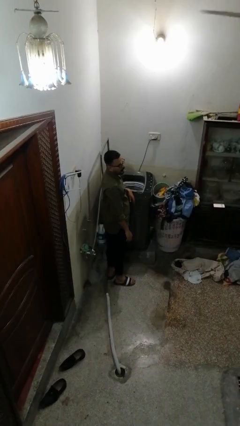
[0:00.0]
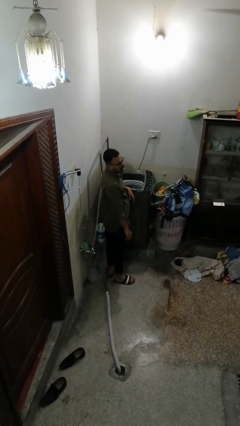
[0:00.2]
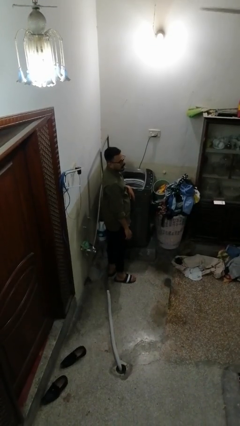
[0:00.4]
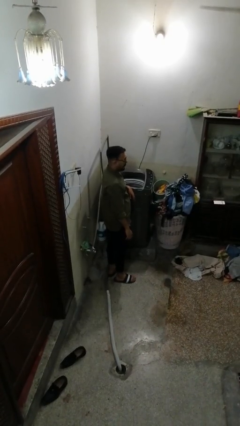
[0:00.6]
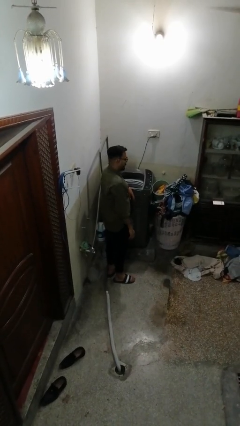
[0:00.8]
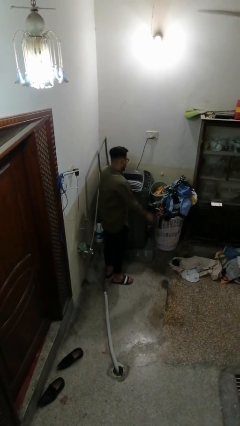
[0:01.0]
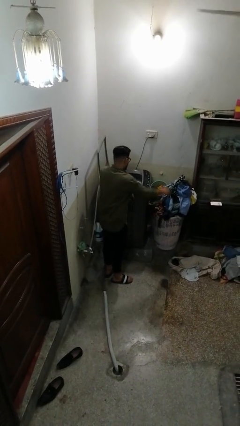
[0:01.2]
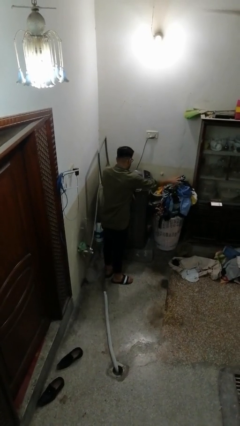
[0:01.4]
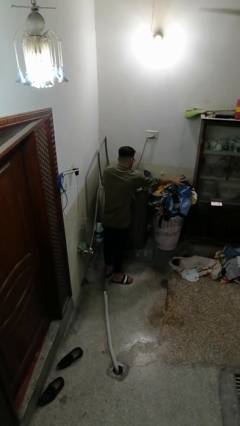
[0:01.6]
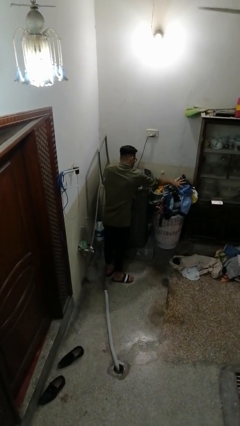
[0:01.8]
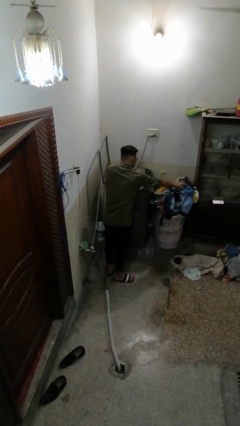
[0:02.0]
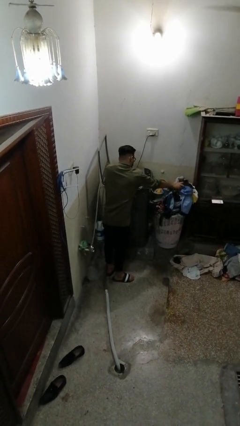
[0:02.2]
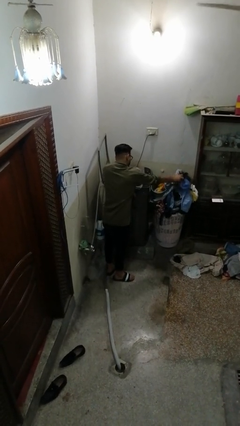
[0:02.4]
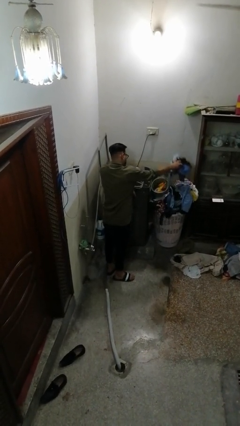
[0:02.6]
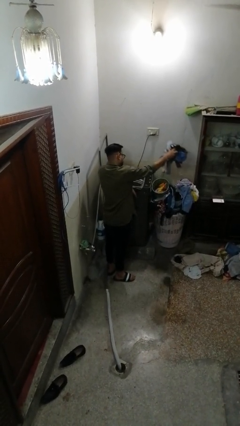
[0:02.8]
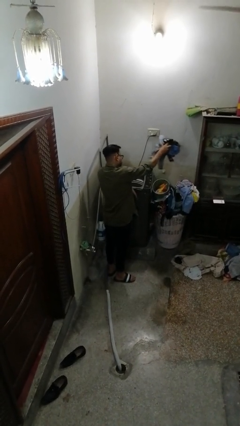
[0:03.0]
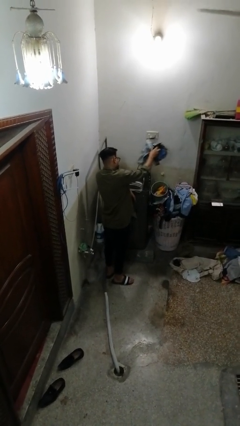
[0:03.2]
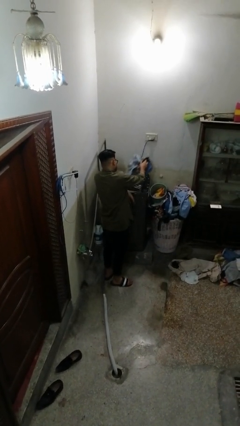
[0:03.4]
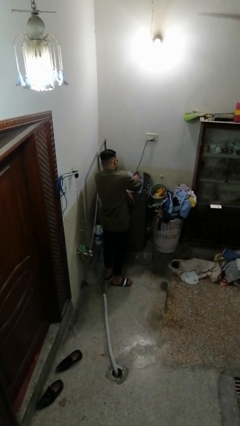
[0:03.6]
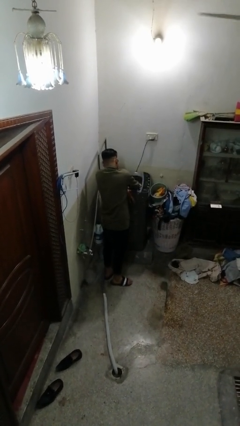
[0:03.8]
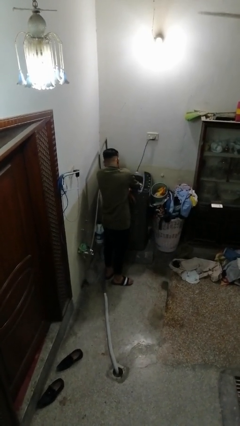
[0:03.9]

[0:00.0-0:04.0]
person loads clotheswasher

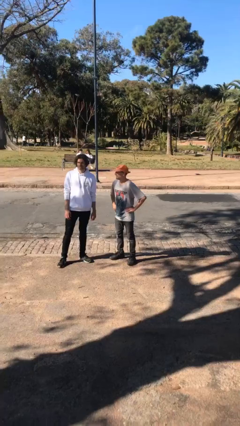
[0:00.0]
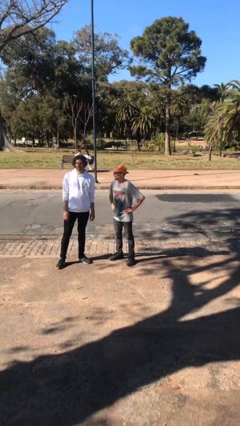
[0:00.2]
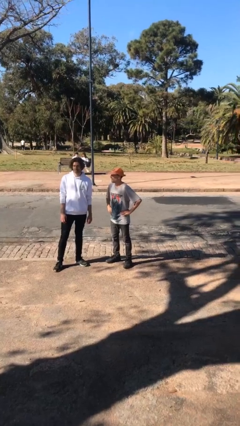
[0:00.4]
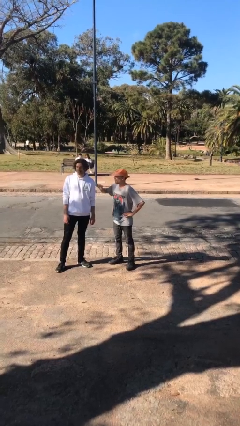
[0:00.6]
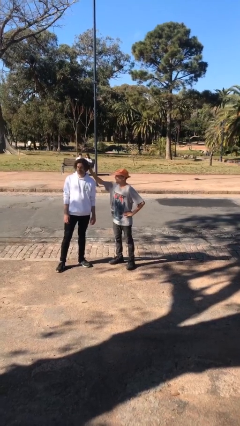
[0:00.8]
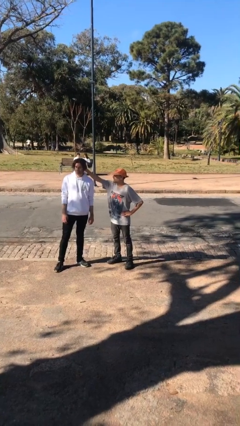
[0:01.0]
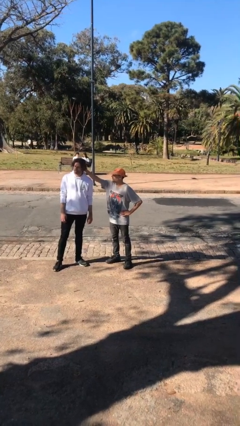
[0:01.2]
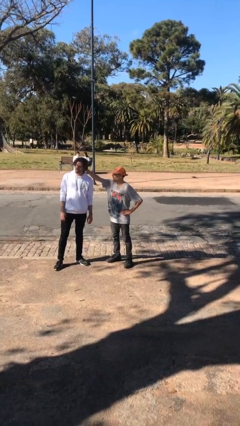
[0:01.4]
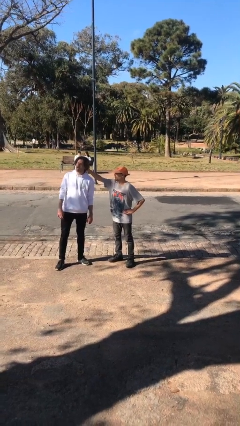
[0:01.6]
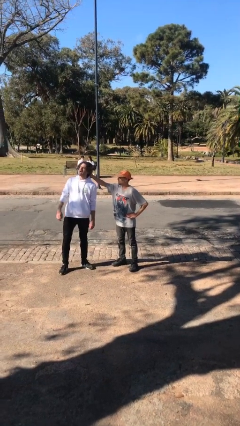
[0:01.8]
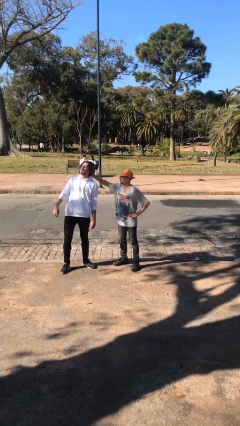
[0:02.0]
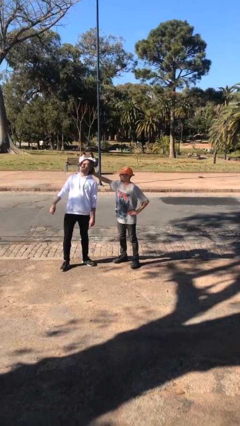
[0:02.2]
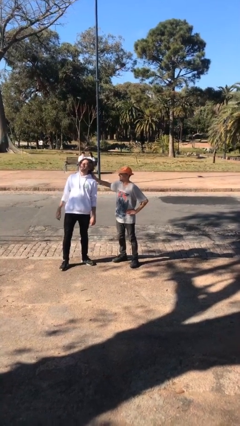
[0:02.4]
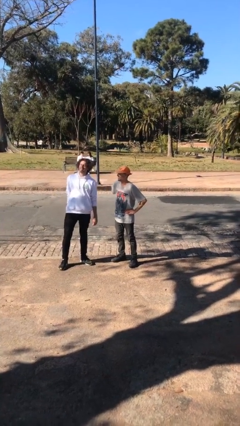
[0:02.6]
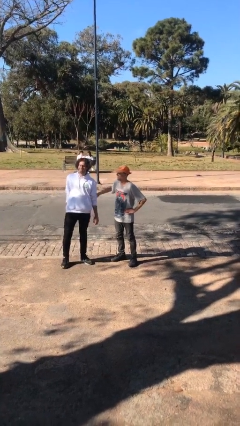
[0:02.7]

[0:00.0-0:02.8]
person grabs person by hair

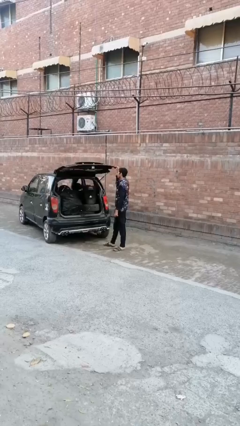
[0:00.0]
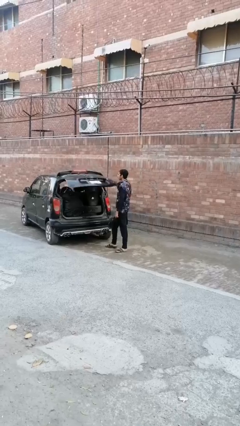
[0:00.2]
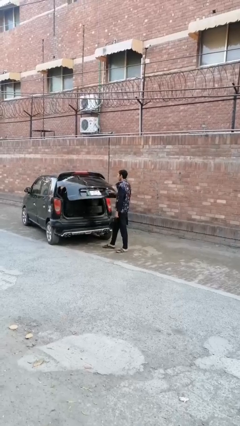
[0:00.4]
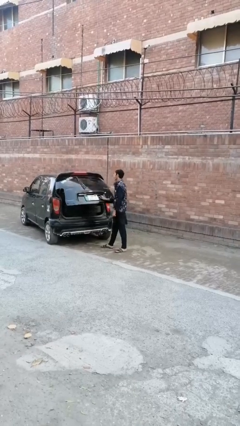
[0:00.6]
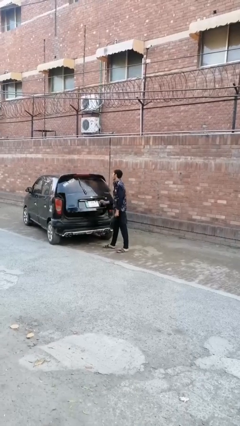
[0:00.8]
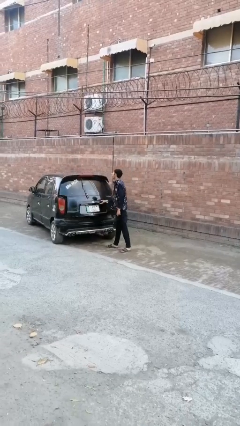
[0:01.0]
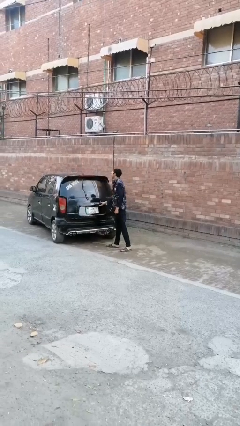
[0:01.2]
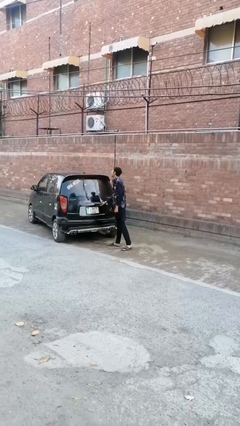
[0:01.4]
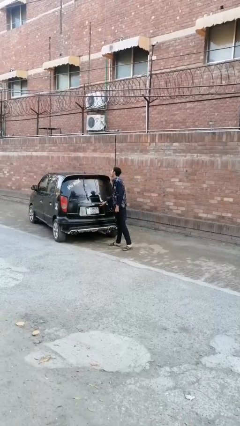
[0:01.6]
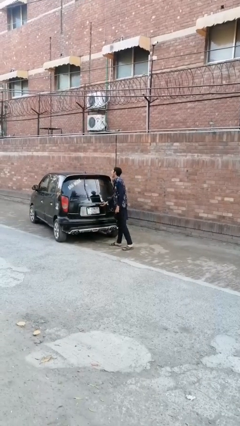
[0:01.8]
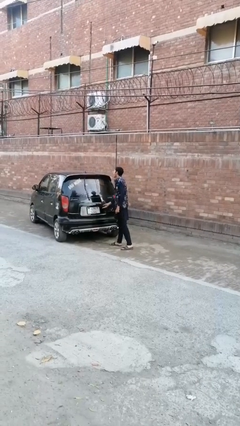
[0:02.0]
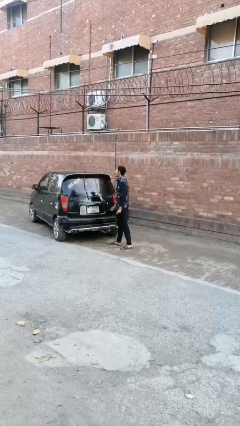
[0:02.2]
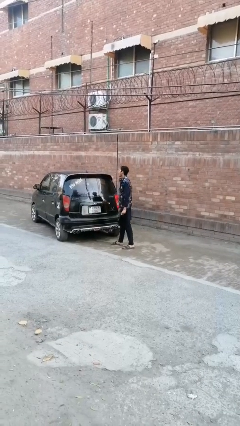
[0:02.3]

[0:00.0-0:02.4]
person closes car trunk

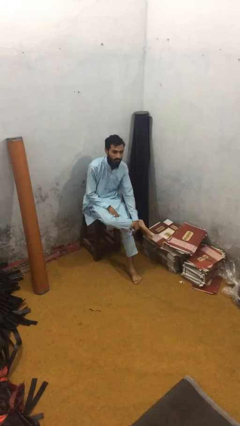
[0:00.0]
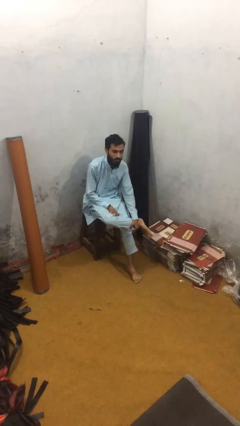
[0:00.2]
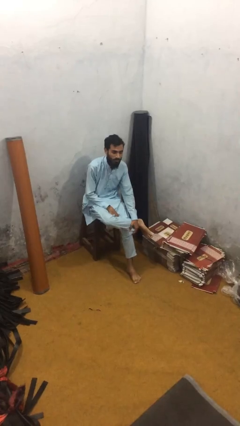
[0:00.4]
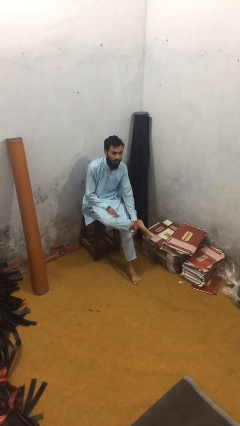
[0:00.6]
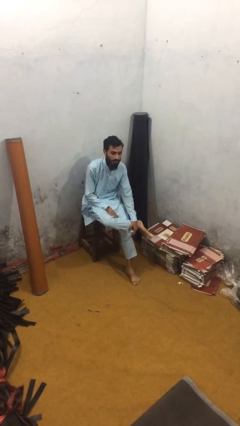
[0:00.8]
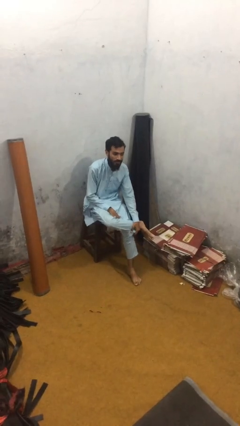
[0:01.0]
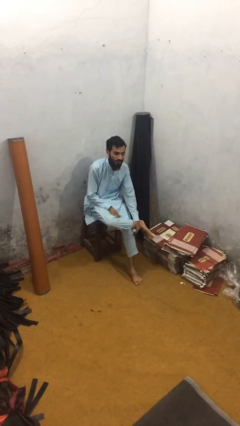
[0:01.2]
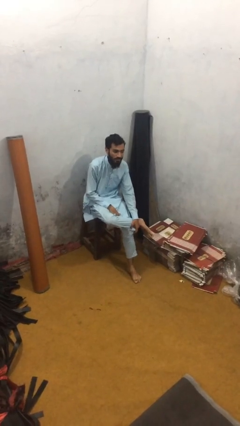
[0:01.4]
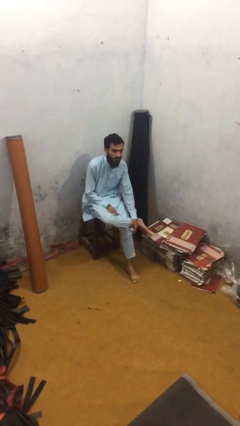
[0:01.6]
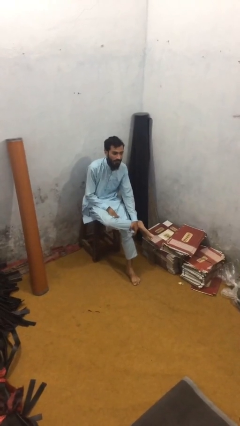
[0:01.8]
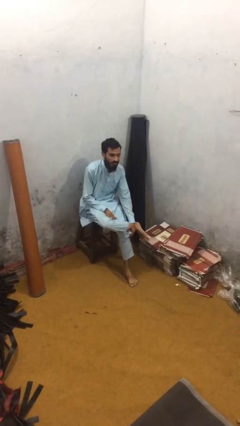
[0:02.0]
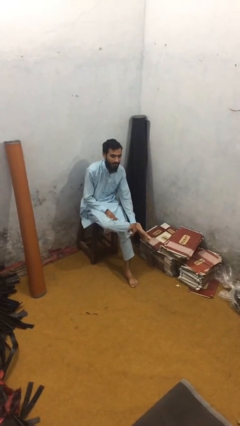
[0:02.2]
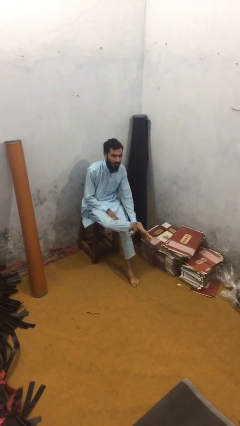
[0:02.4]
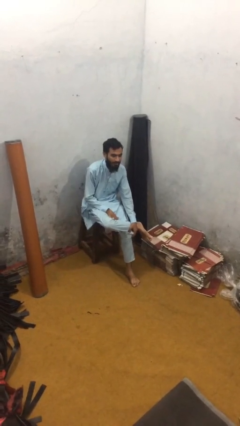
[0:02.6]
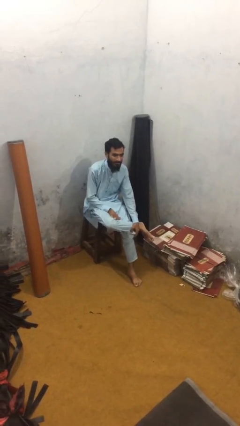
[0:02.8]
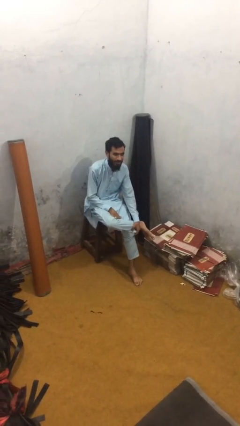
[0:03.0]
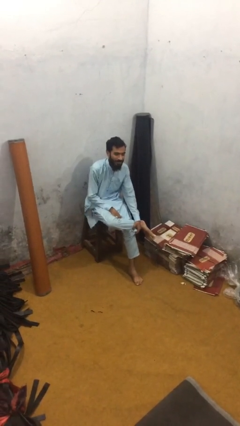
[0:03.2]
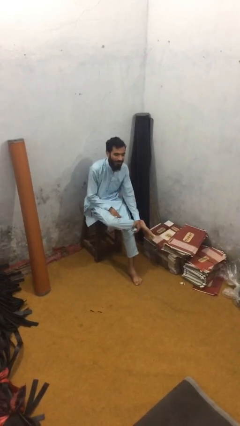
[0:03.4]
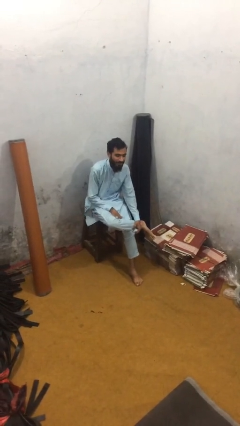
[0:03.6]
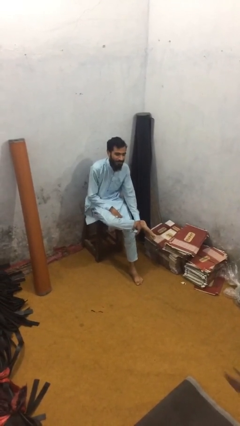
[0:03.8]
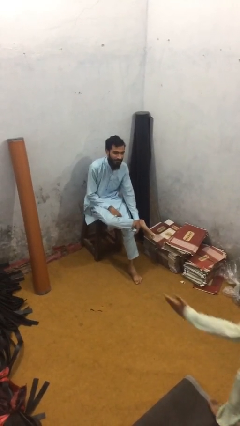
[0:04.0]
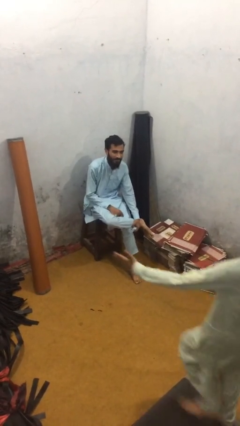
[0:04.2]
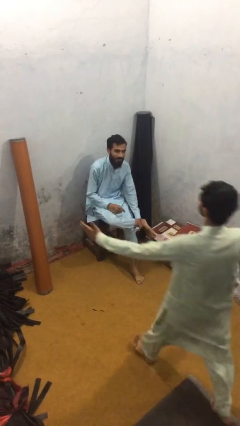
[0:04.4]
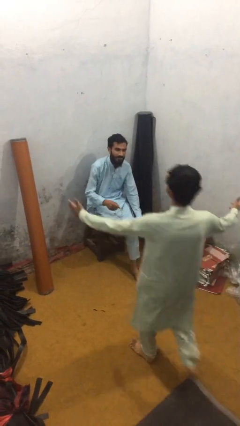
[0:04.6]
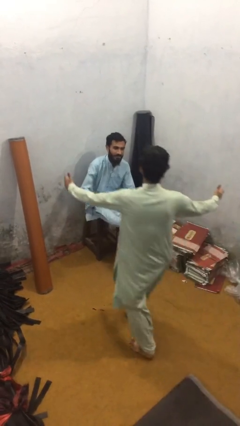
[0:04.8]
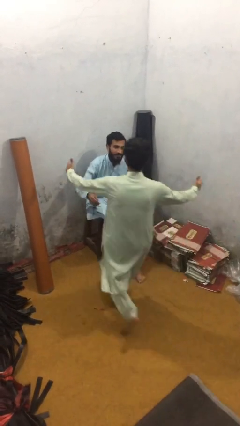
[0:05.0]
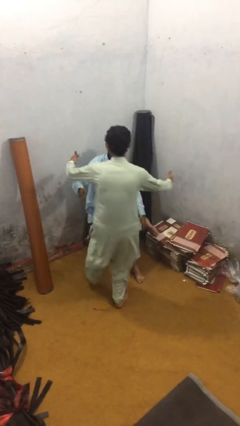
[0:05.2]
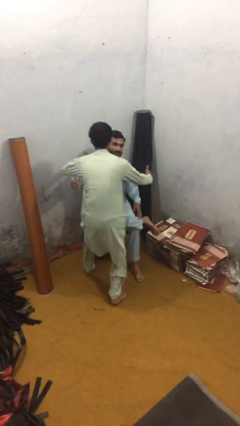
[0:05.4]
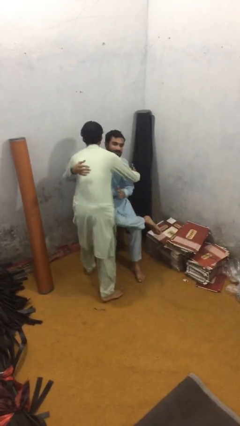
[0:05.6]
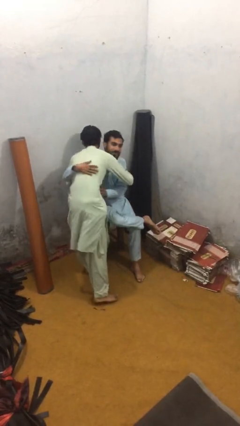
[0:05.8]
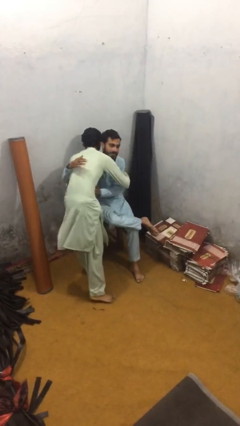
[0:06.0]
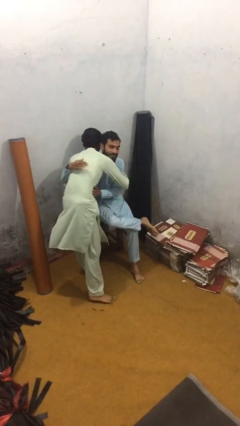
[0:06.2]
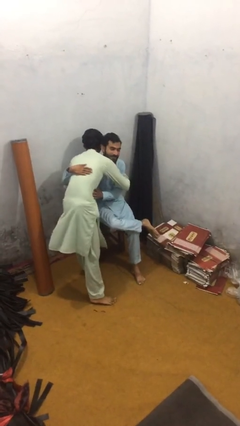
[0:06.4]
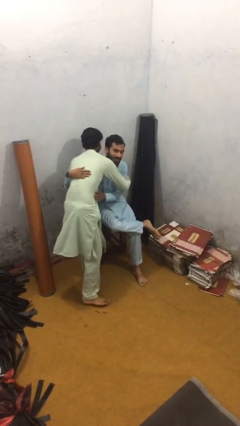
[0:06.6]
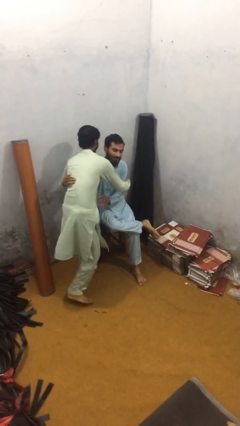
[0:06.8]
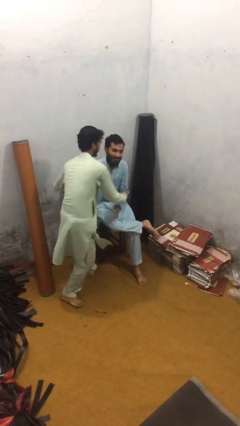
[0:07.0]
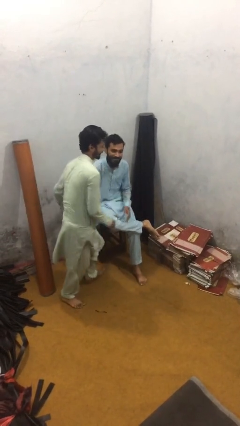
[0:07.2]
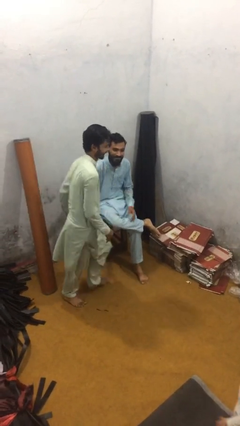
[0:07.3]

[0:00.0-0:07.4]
person embraces person

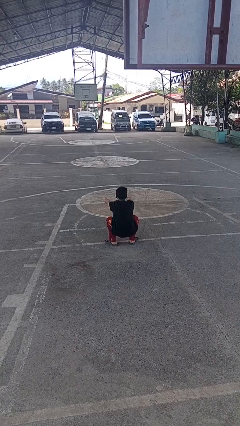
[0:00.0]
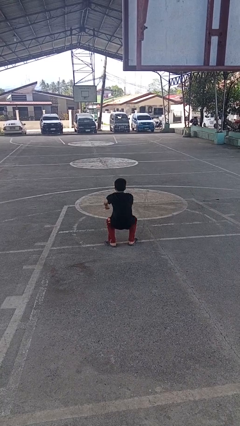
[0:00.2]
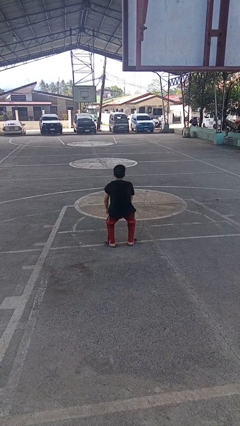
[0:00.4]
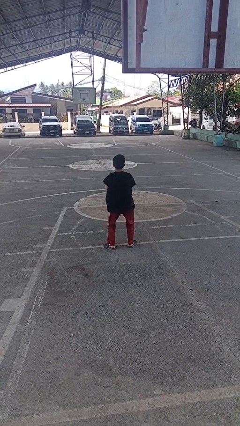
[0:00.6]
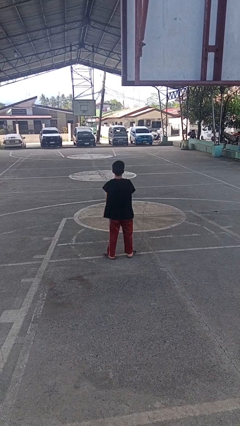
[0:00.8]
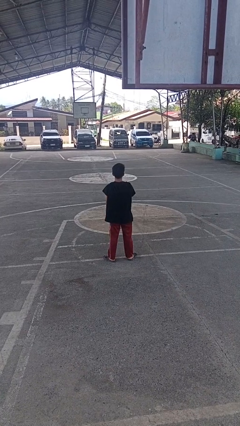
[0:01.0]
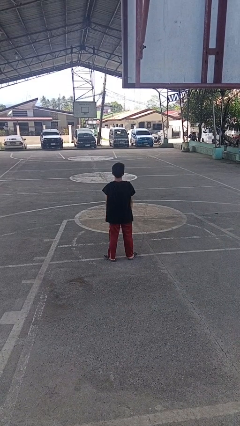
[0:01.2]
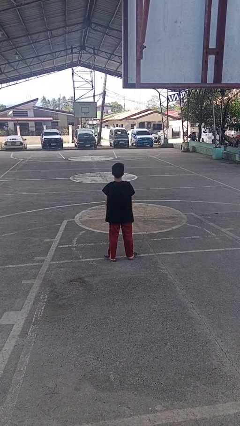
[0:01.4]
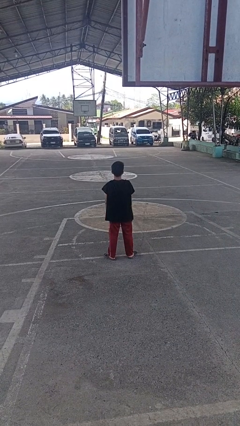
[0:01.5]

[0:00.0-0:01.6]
person stands up
